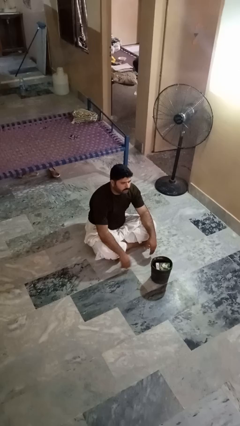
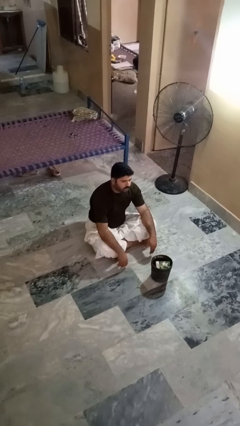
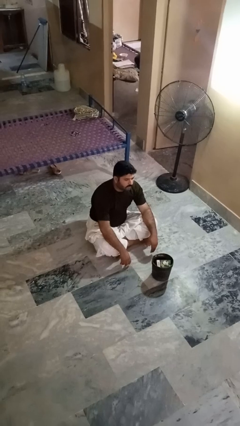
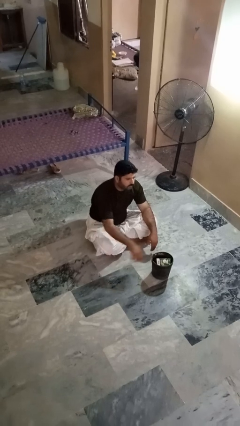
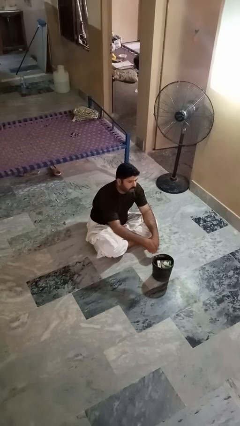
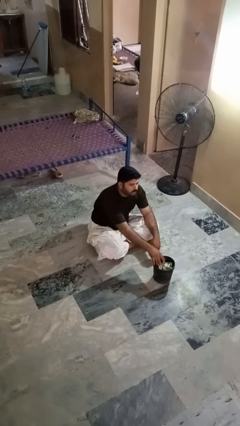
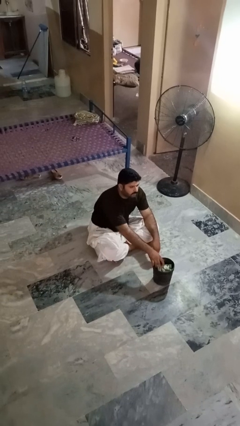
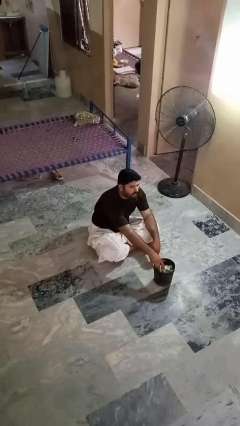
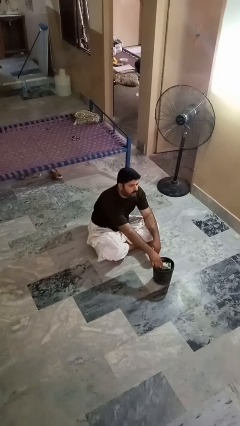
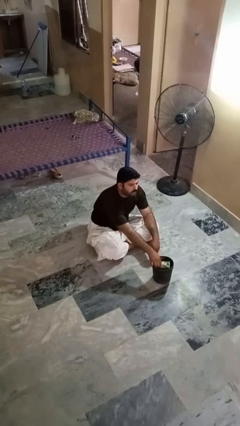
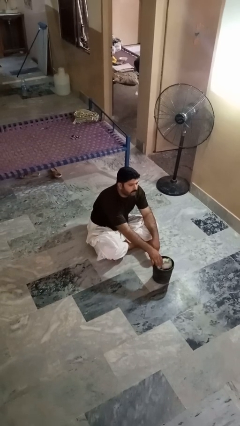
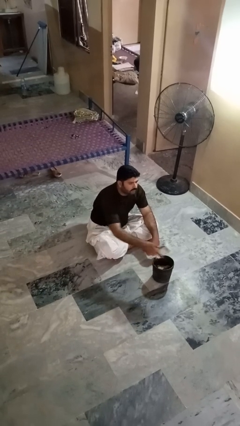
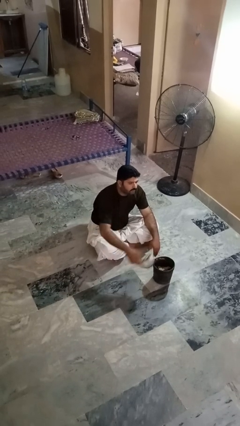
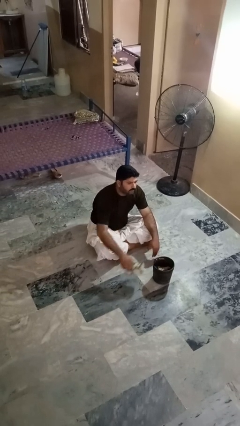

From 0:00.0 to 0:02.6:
person takes object from basket

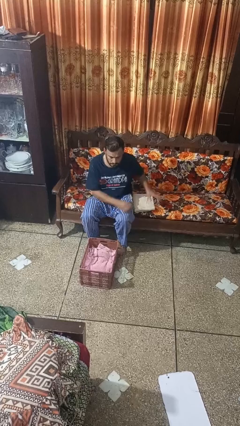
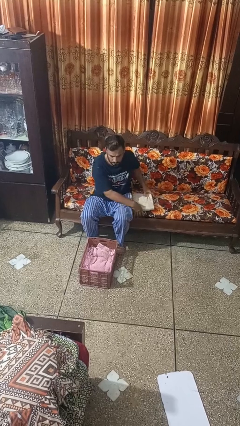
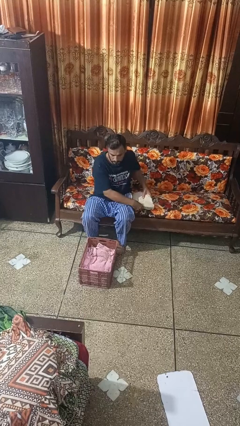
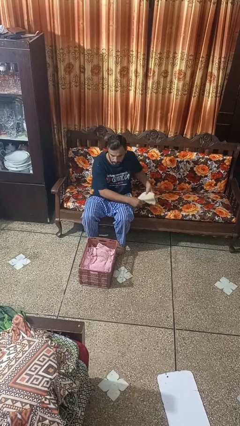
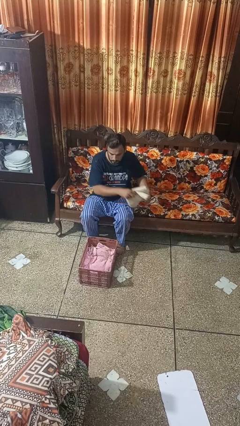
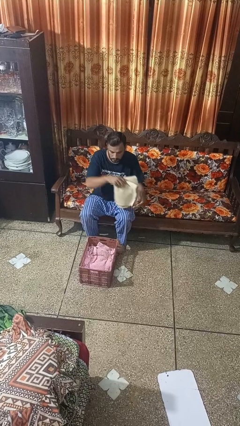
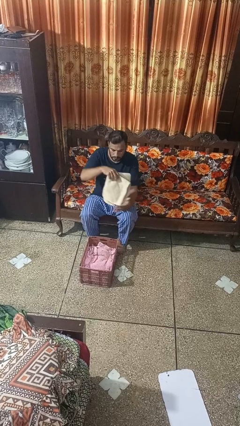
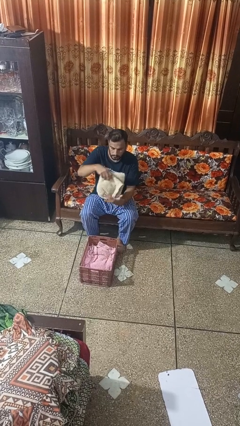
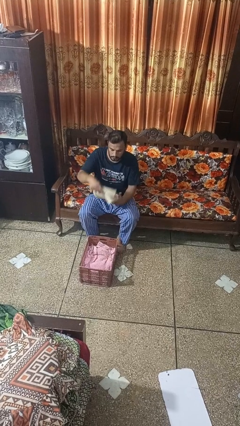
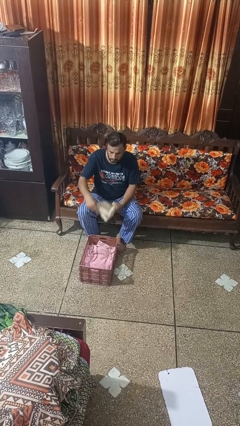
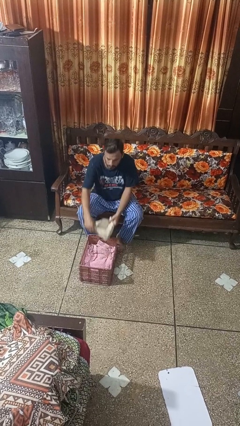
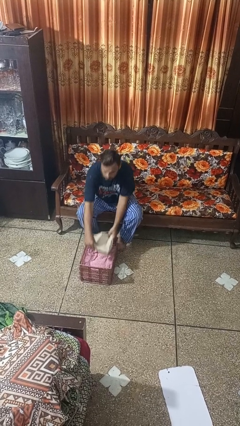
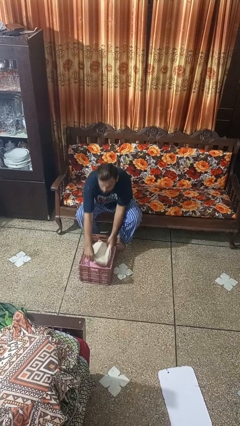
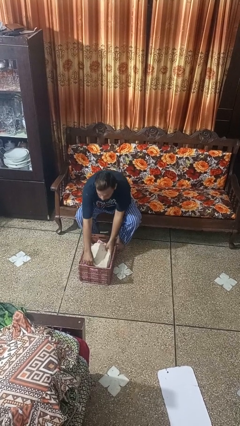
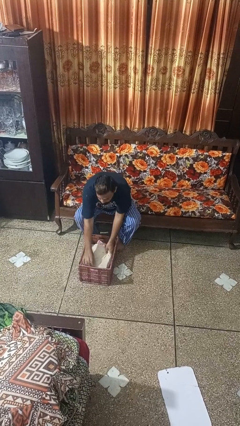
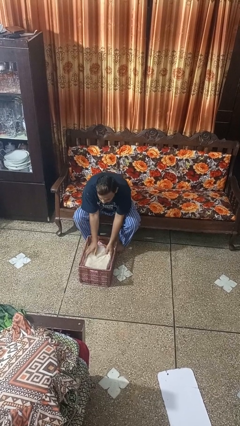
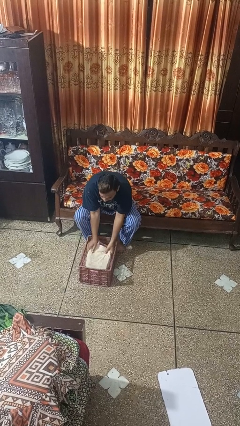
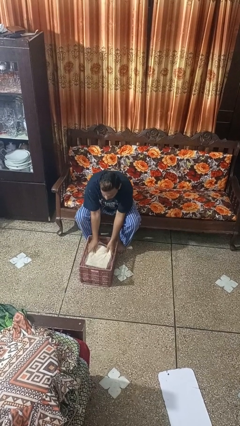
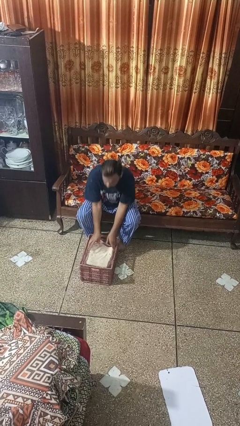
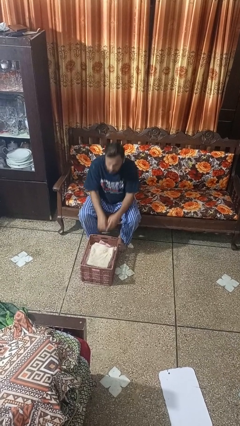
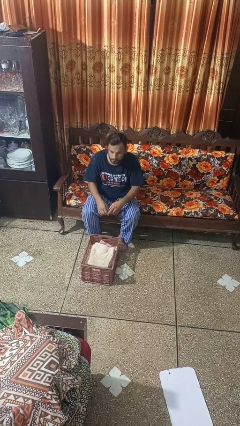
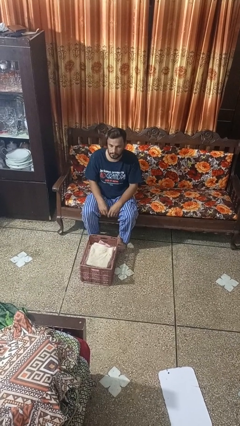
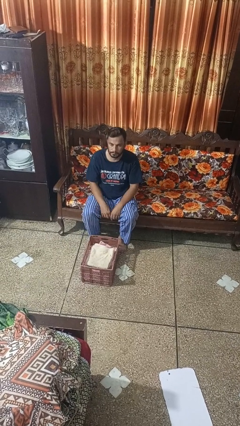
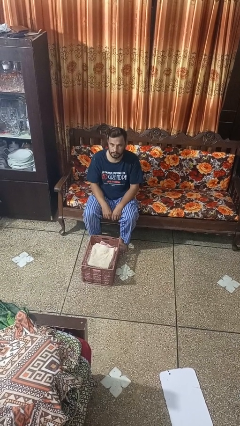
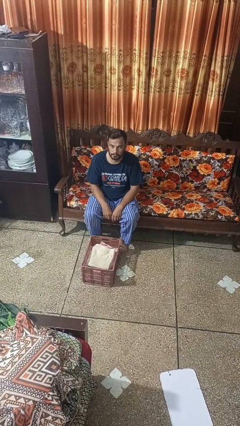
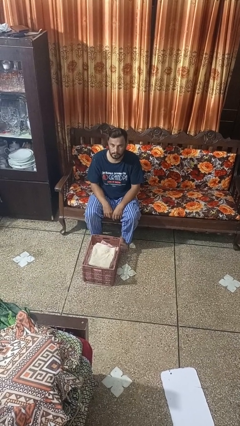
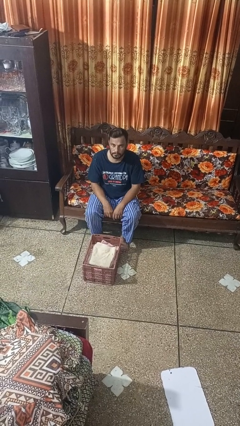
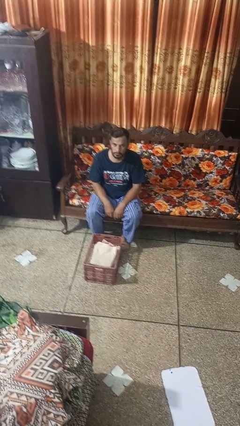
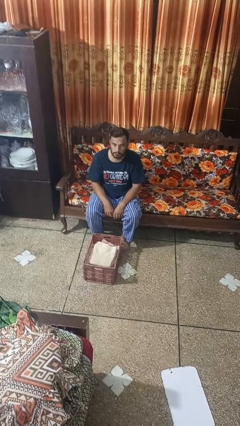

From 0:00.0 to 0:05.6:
person puts object into basket

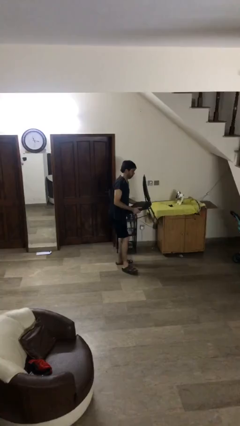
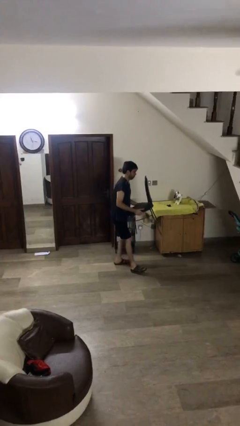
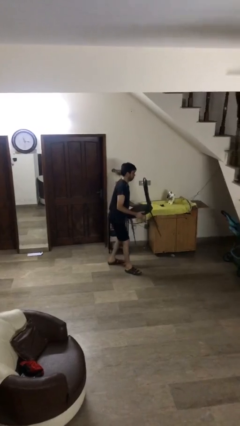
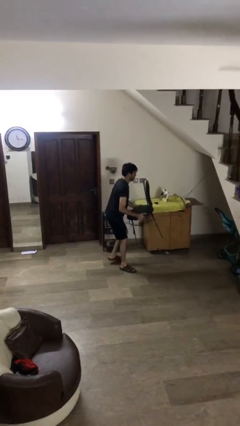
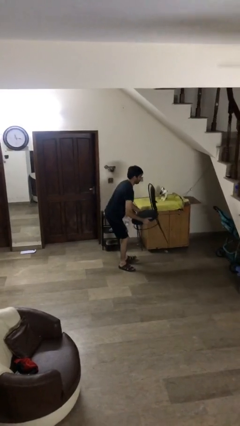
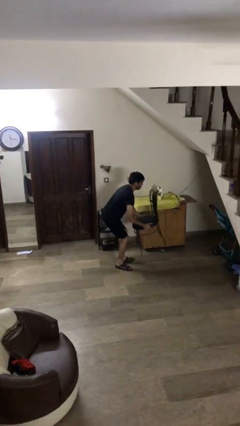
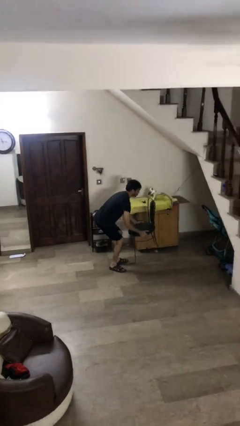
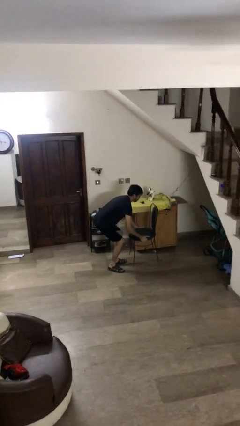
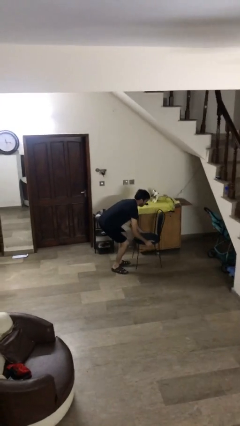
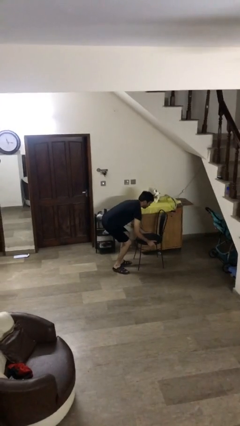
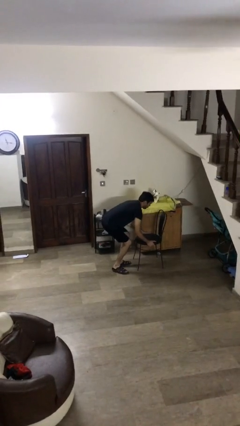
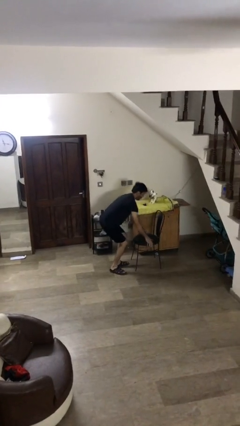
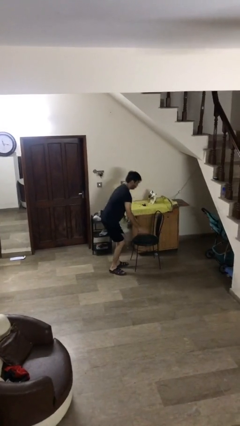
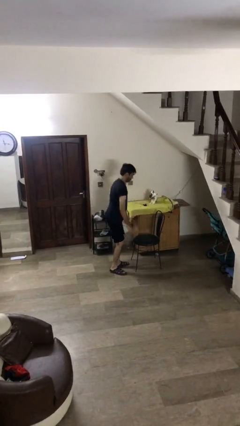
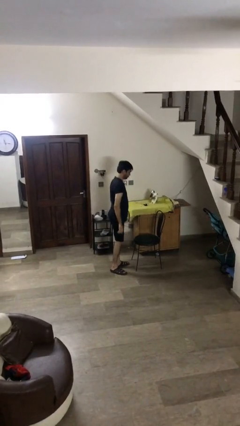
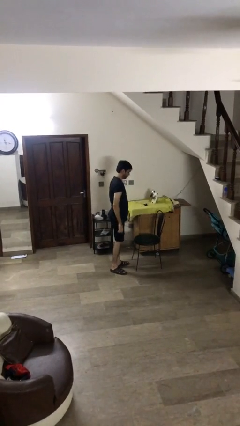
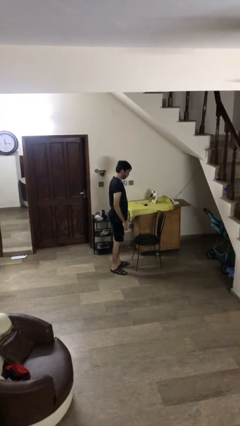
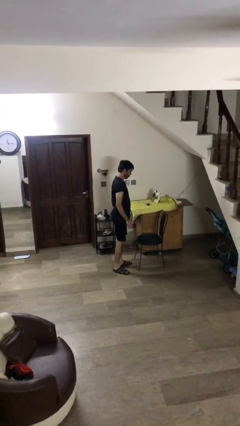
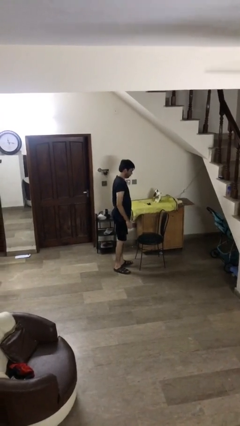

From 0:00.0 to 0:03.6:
person puts down object on floor

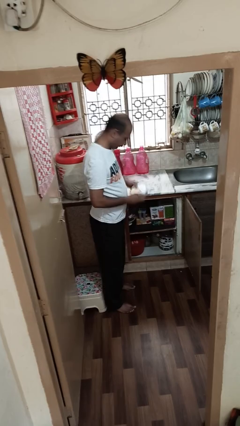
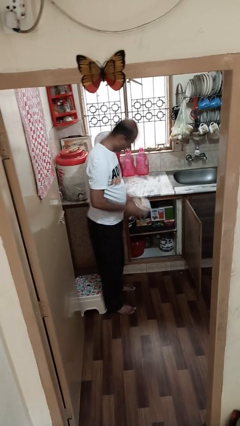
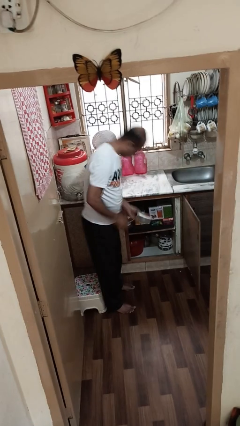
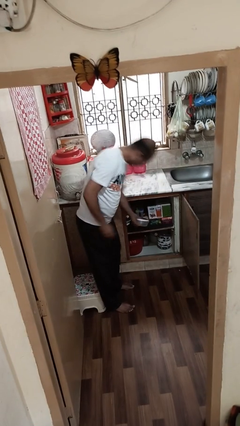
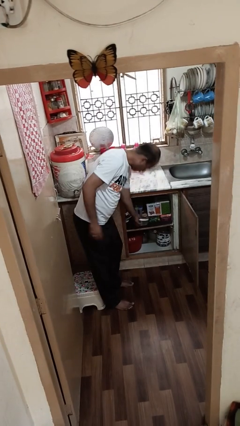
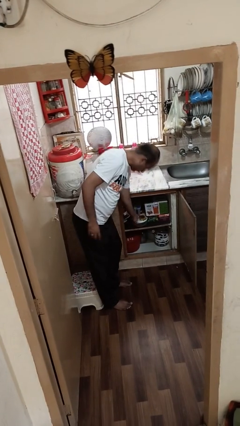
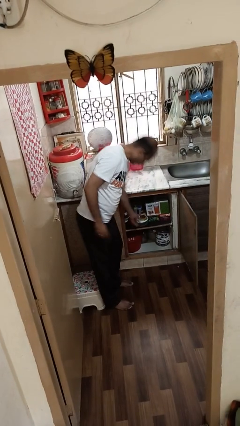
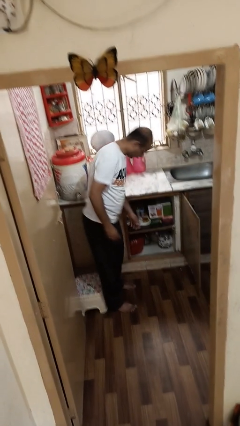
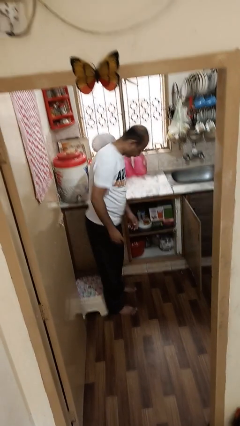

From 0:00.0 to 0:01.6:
person puts down object into cabinet

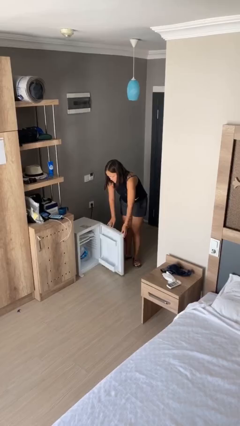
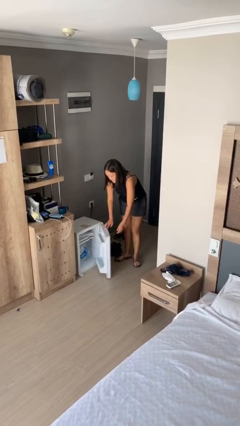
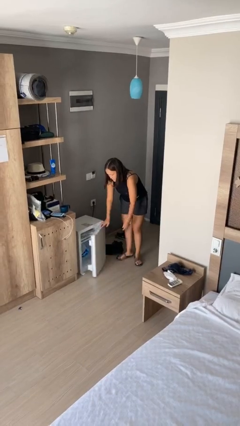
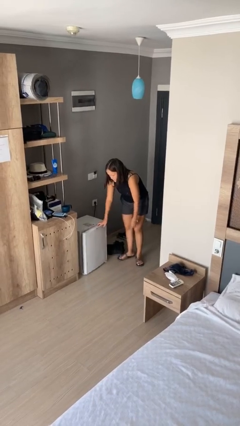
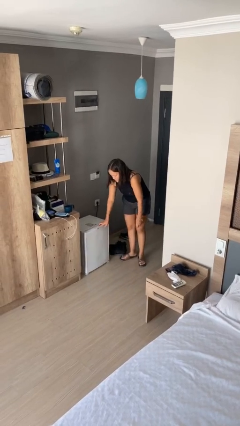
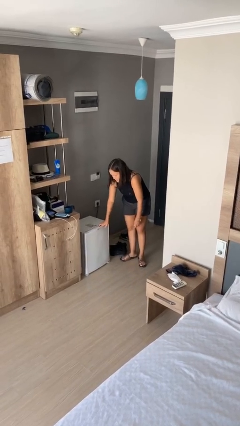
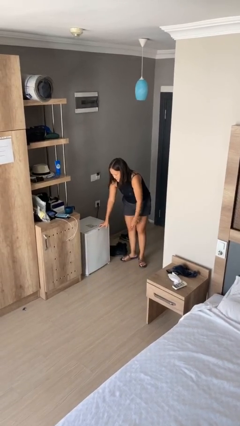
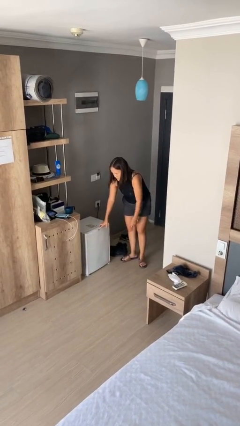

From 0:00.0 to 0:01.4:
person closes refrigerator

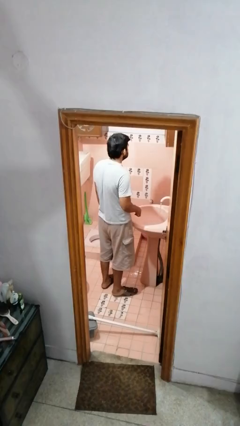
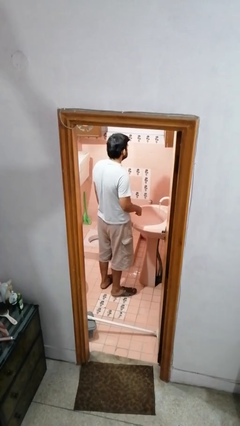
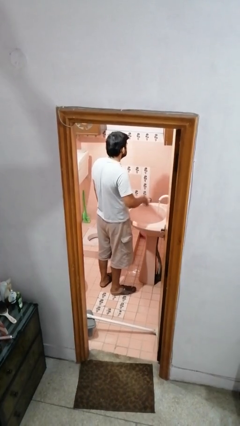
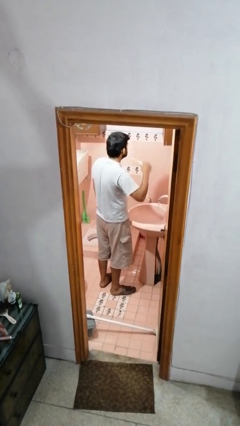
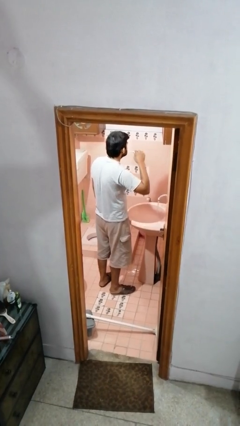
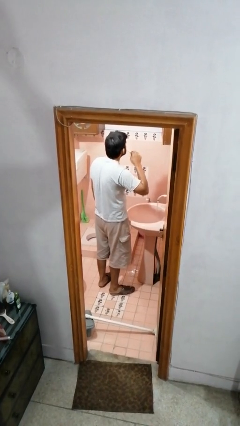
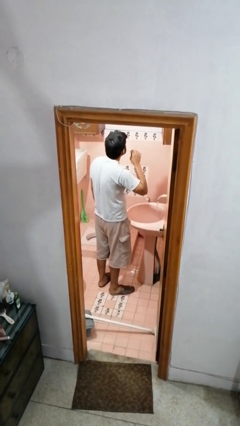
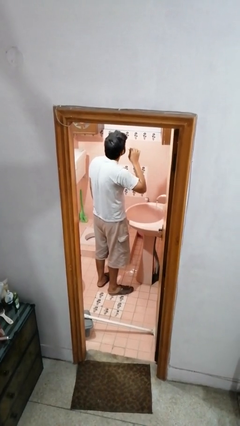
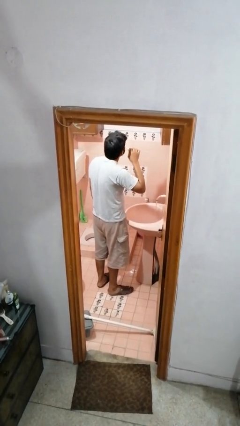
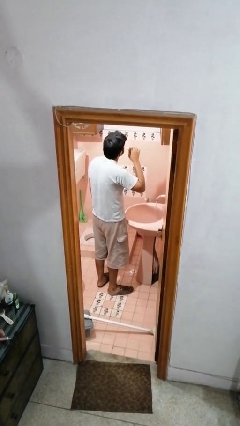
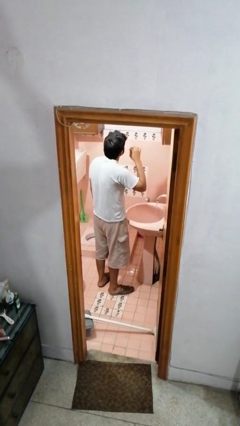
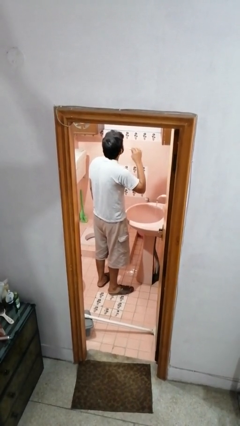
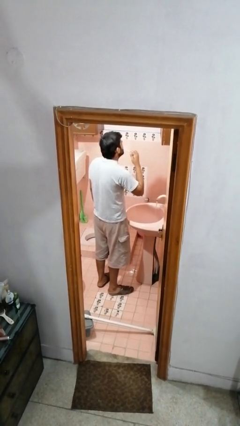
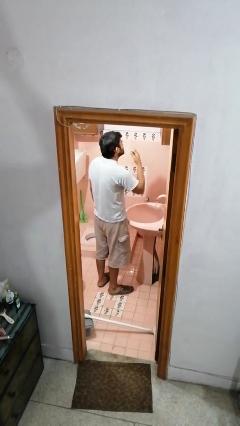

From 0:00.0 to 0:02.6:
person brushes teeth
